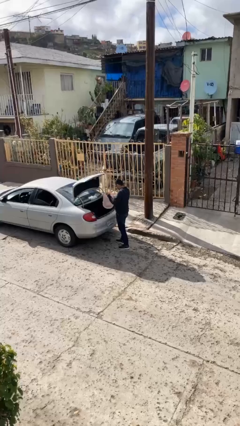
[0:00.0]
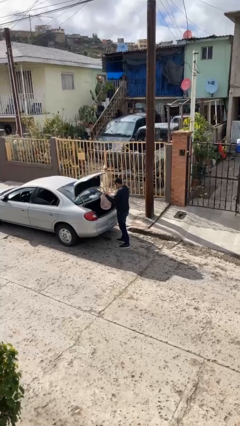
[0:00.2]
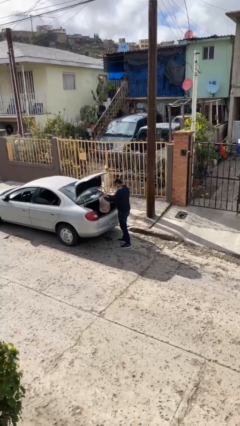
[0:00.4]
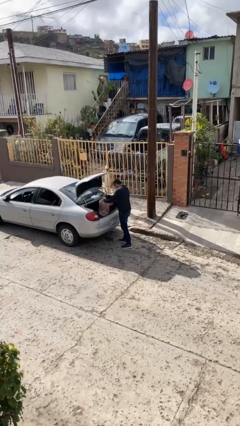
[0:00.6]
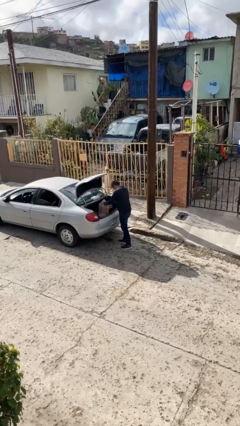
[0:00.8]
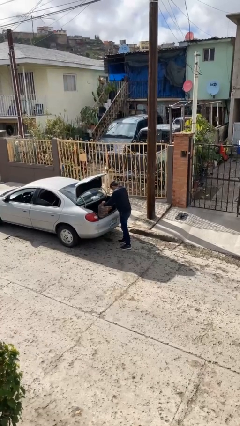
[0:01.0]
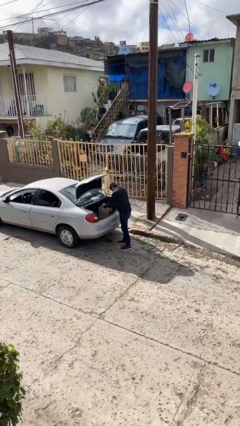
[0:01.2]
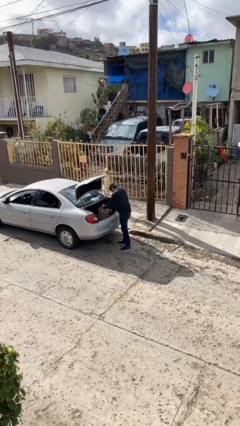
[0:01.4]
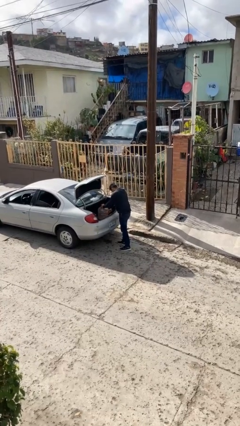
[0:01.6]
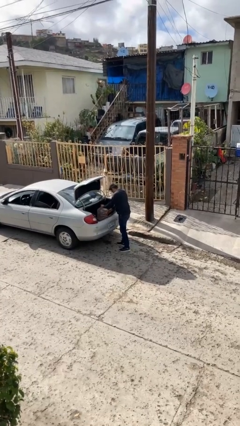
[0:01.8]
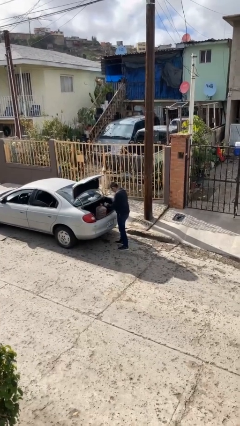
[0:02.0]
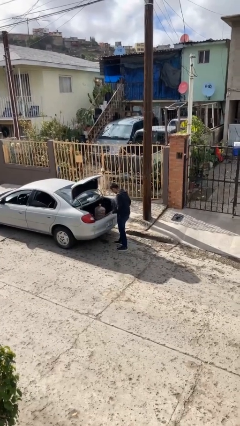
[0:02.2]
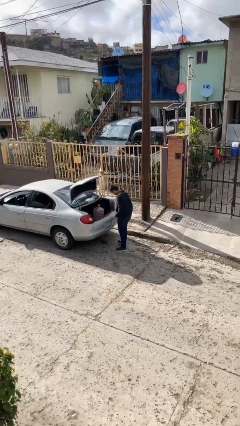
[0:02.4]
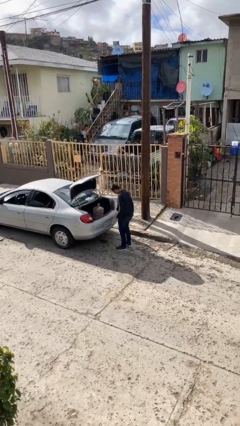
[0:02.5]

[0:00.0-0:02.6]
person loads car

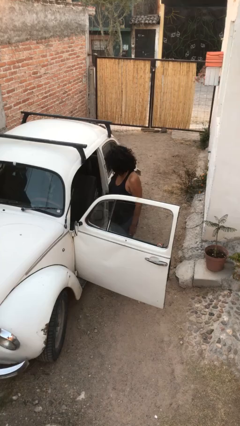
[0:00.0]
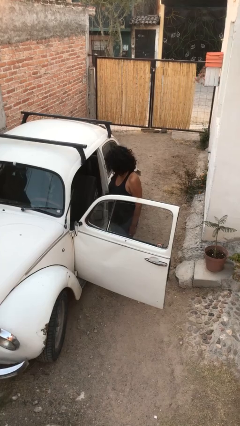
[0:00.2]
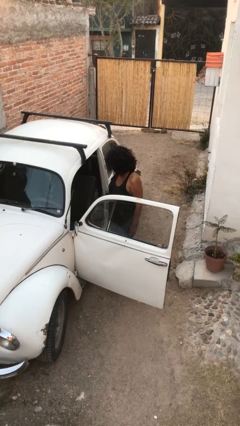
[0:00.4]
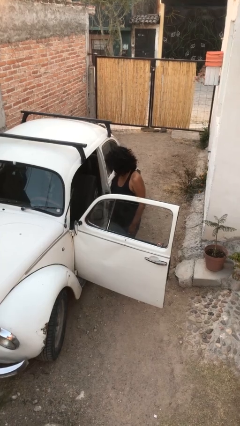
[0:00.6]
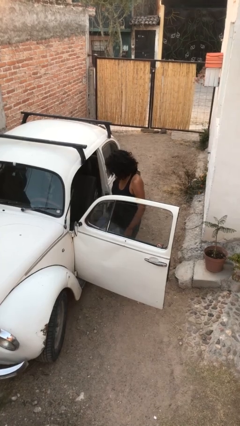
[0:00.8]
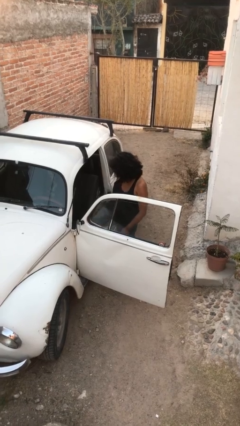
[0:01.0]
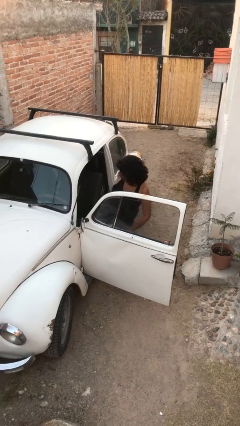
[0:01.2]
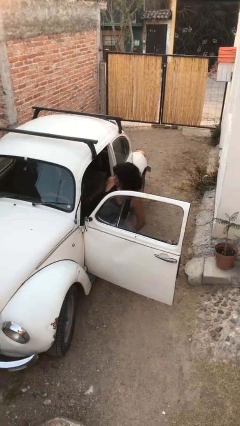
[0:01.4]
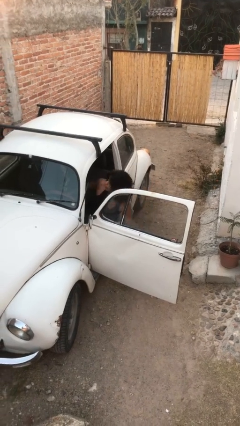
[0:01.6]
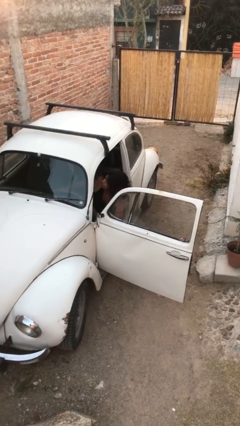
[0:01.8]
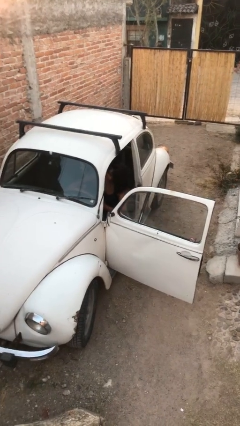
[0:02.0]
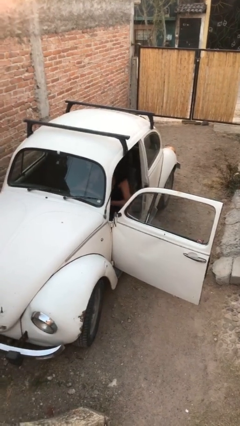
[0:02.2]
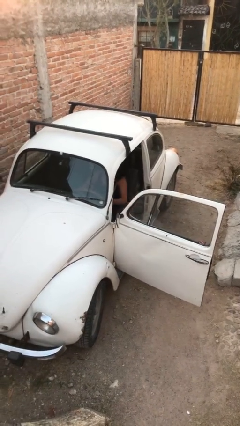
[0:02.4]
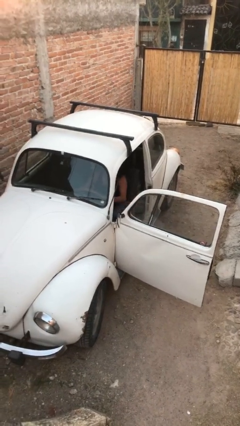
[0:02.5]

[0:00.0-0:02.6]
person enters car

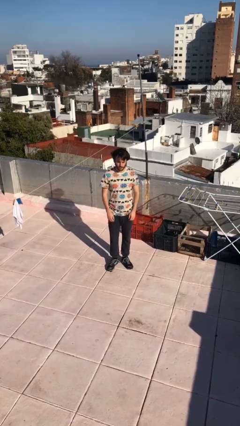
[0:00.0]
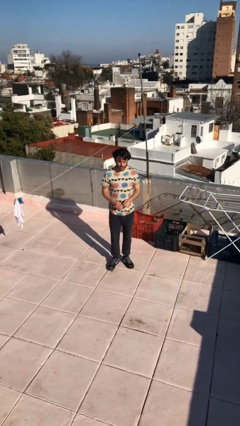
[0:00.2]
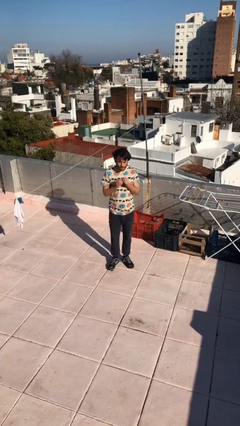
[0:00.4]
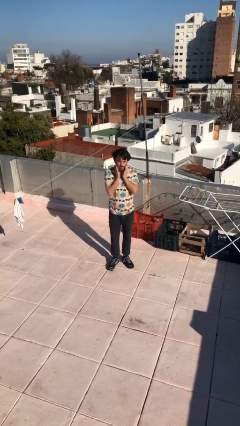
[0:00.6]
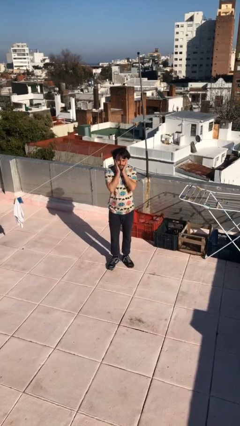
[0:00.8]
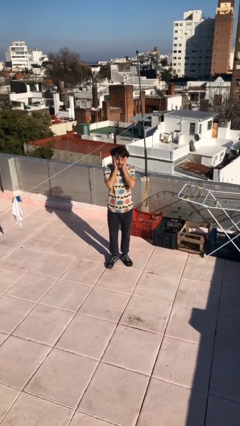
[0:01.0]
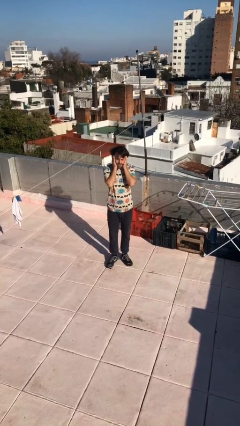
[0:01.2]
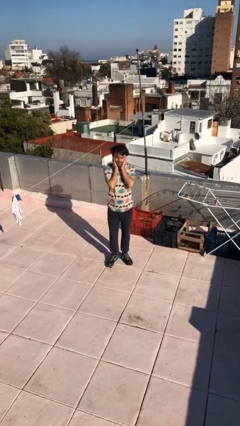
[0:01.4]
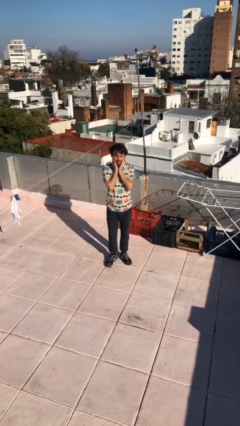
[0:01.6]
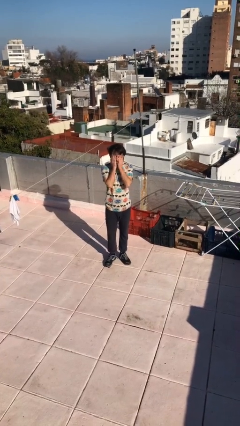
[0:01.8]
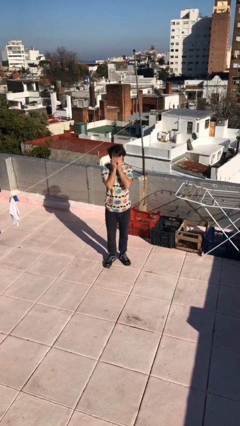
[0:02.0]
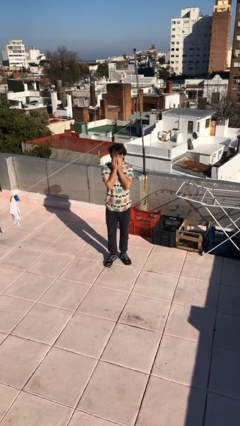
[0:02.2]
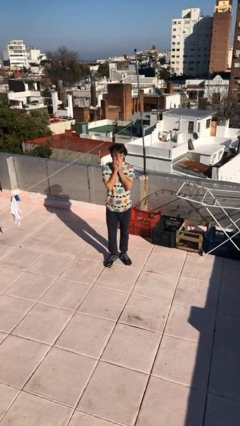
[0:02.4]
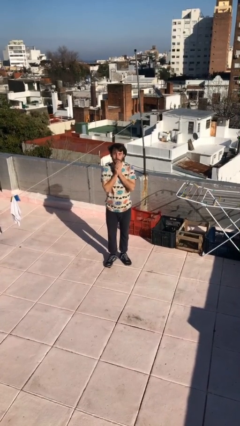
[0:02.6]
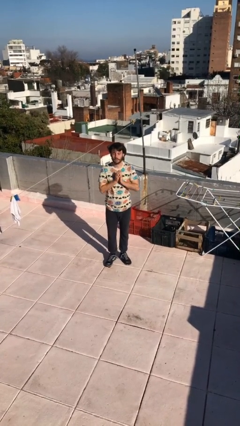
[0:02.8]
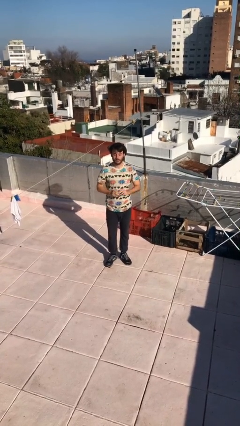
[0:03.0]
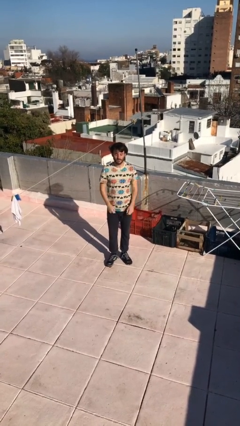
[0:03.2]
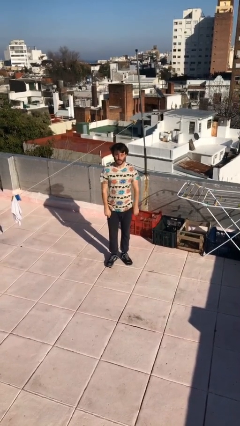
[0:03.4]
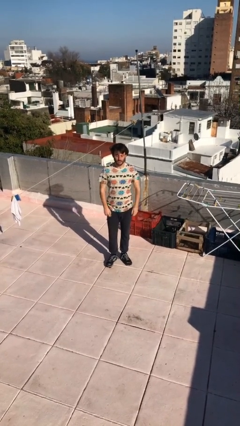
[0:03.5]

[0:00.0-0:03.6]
person scratches face

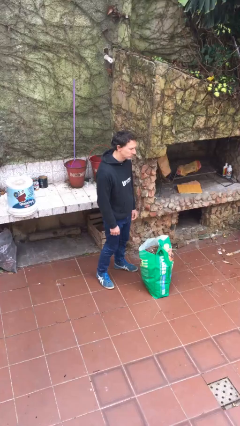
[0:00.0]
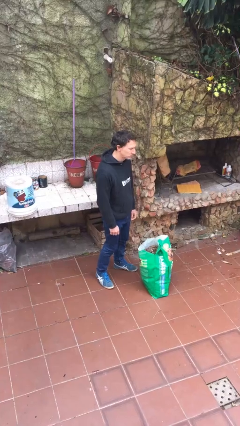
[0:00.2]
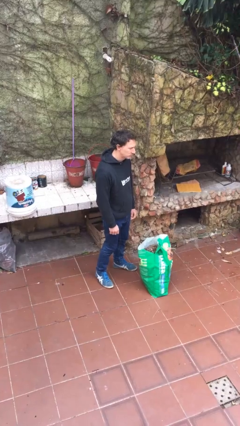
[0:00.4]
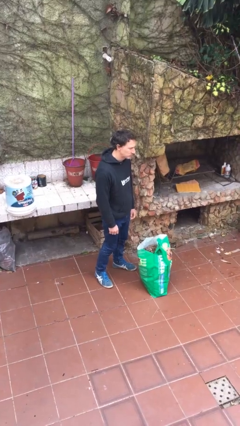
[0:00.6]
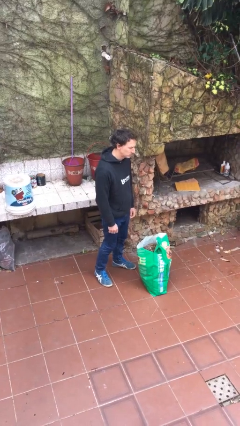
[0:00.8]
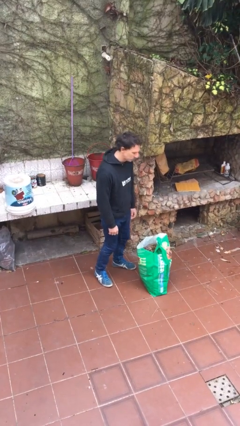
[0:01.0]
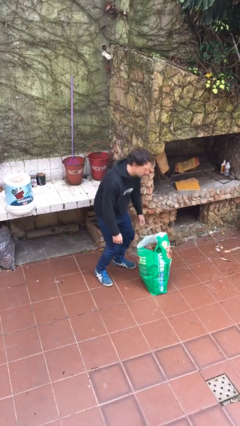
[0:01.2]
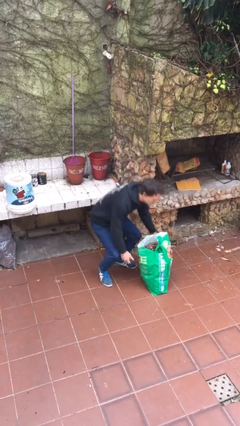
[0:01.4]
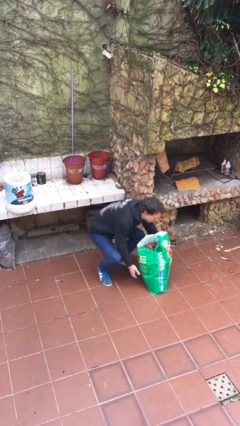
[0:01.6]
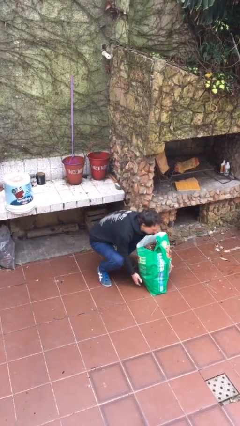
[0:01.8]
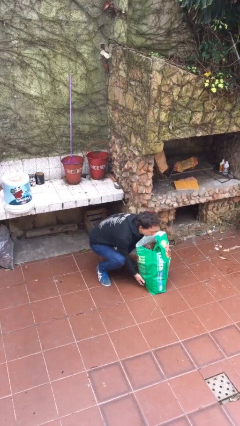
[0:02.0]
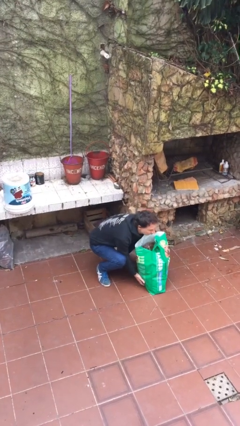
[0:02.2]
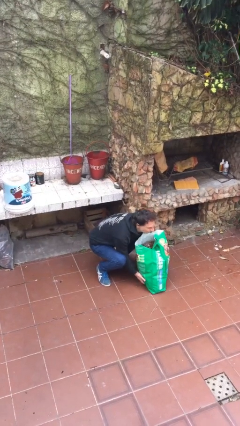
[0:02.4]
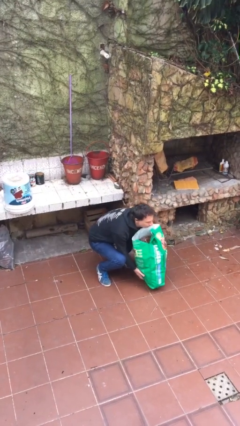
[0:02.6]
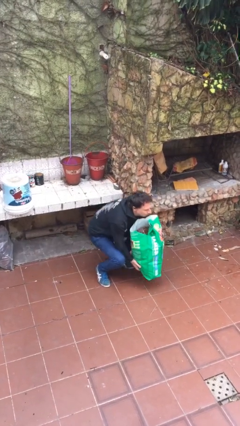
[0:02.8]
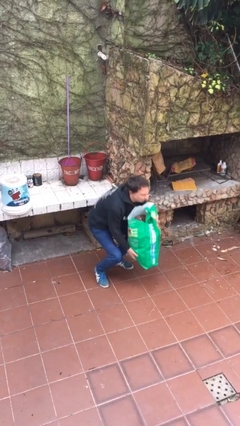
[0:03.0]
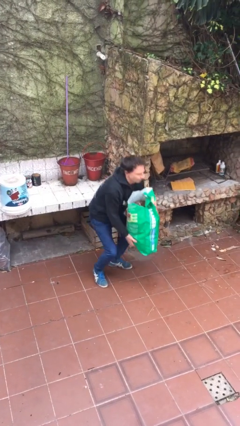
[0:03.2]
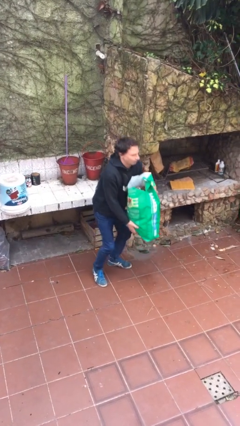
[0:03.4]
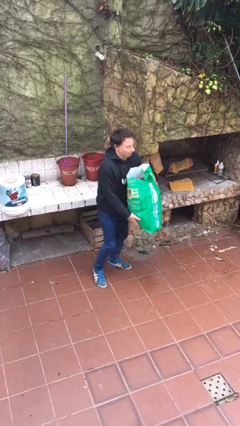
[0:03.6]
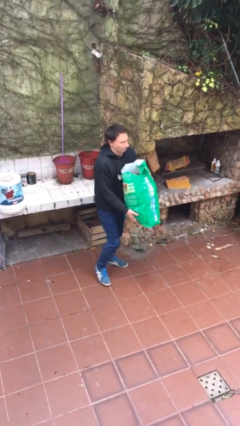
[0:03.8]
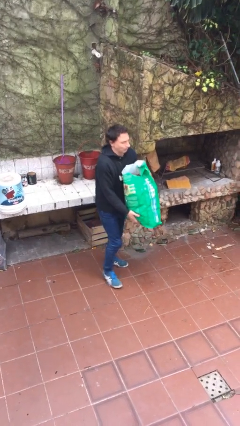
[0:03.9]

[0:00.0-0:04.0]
person picks up object from floor

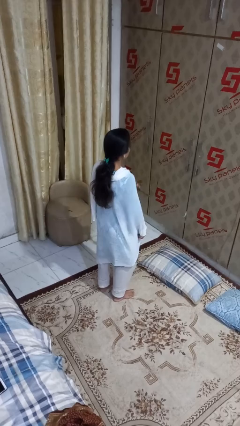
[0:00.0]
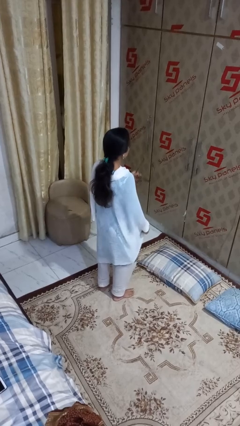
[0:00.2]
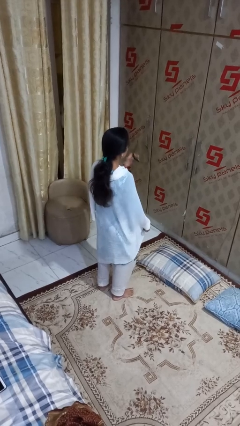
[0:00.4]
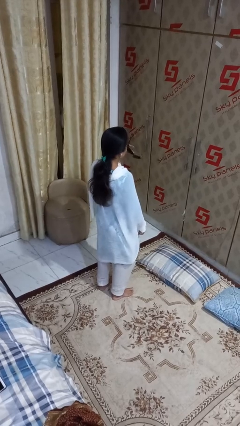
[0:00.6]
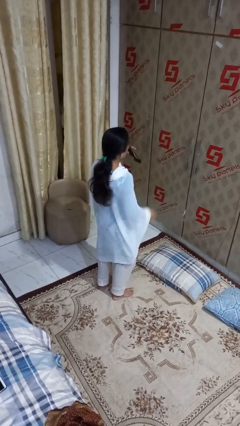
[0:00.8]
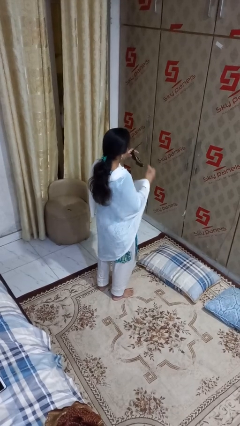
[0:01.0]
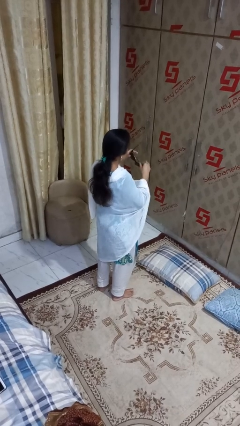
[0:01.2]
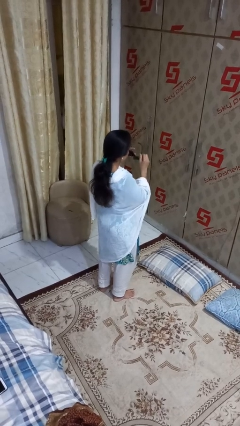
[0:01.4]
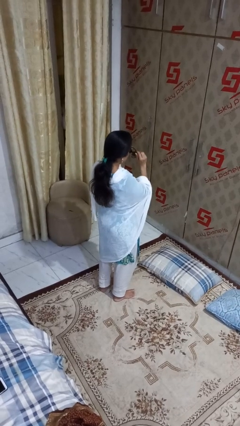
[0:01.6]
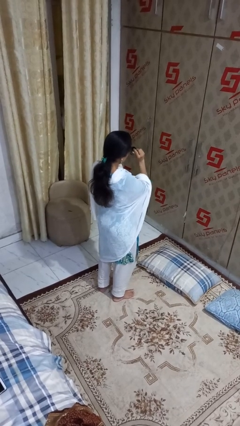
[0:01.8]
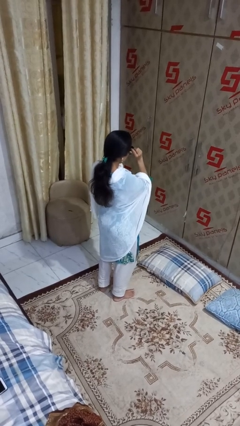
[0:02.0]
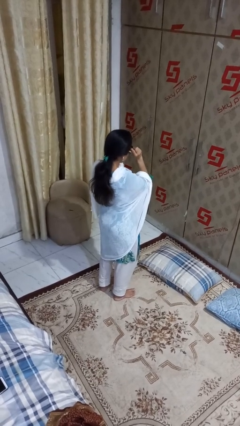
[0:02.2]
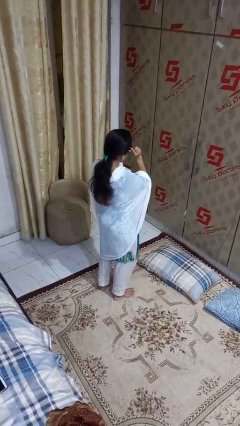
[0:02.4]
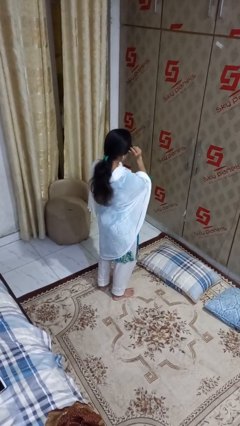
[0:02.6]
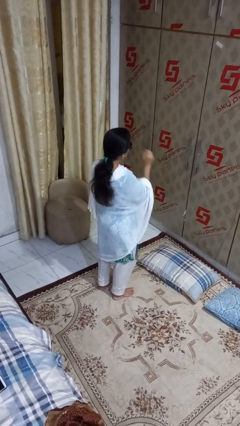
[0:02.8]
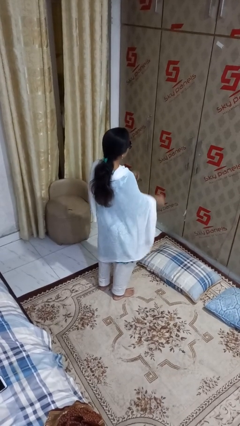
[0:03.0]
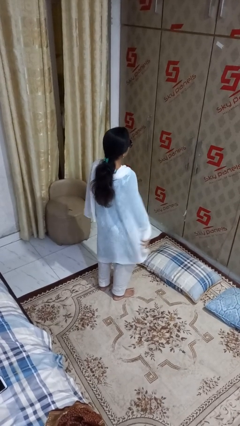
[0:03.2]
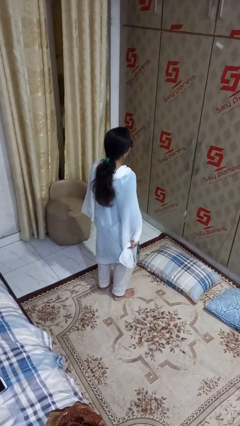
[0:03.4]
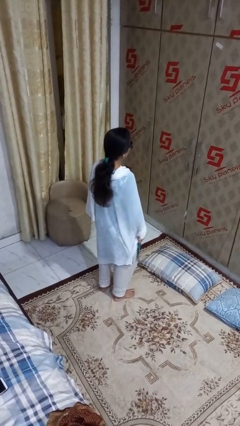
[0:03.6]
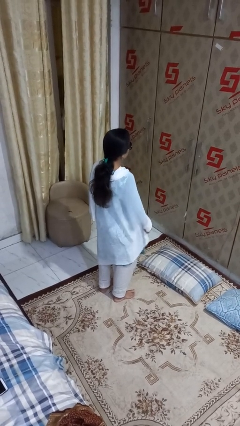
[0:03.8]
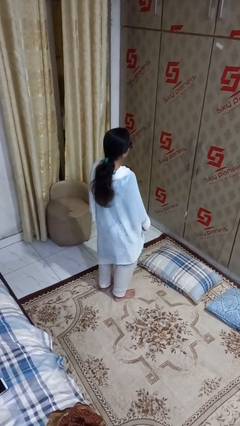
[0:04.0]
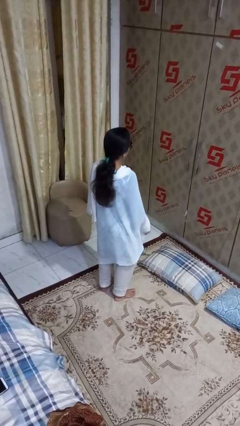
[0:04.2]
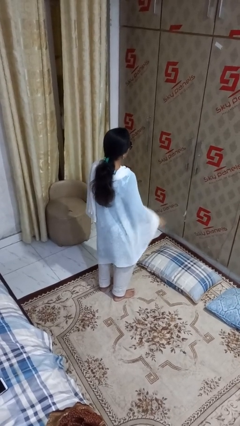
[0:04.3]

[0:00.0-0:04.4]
person puts on sunglasses
